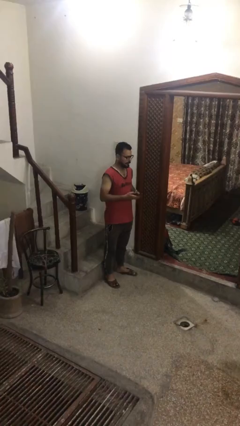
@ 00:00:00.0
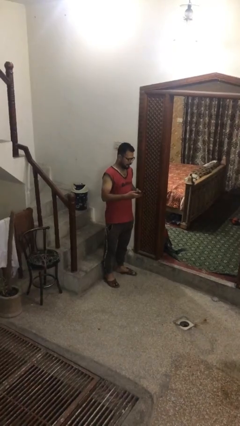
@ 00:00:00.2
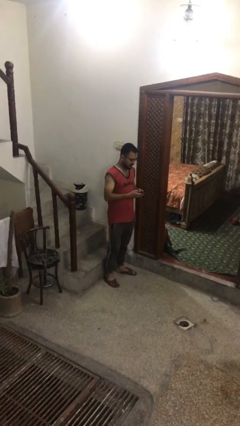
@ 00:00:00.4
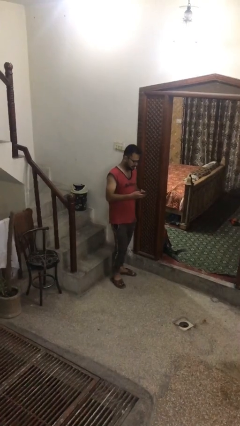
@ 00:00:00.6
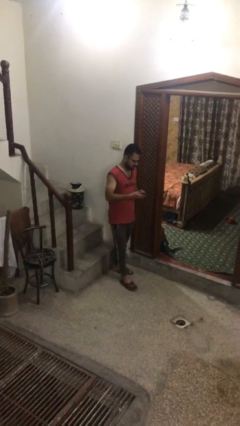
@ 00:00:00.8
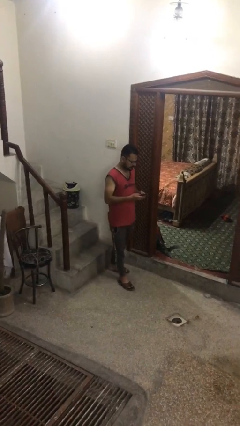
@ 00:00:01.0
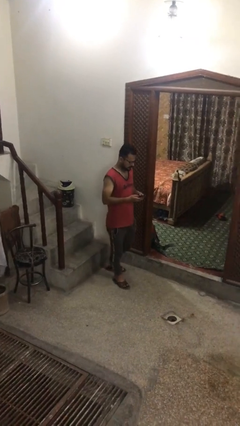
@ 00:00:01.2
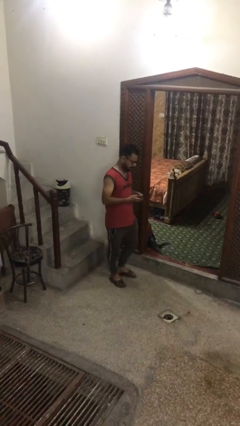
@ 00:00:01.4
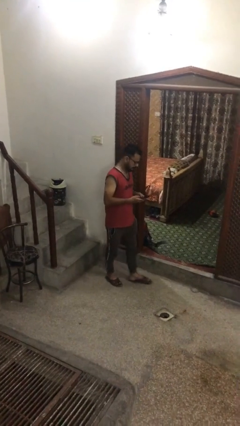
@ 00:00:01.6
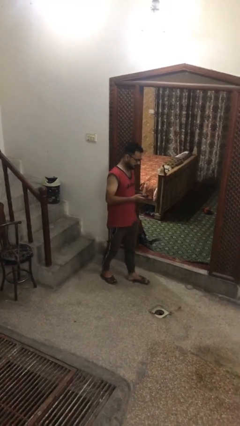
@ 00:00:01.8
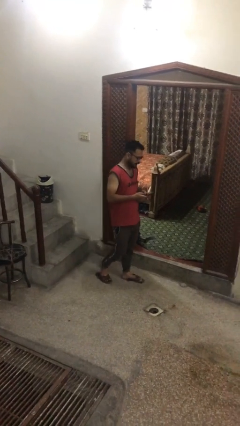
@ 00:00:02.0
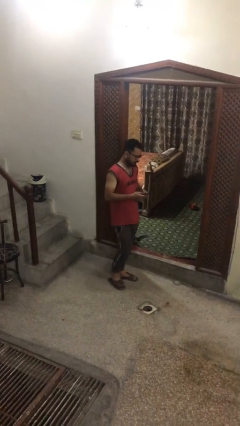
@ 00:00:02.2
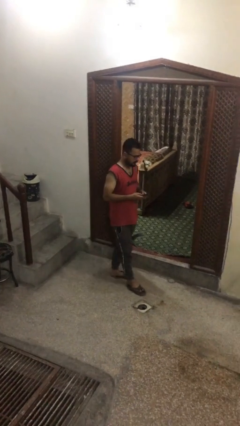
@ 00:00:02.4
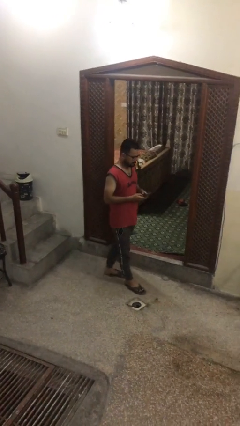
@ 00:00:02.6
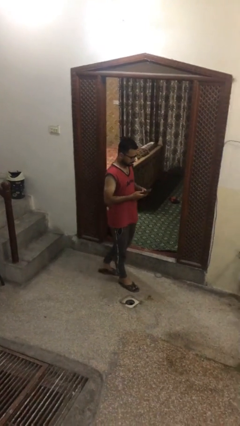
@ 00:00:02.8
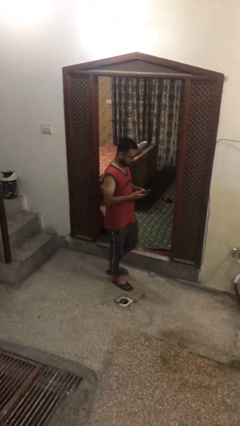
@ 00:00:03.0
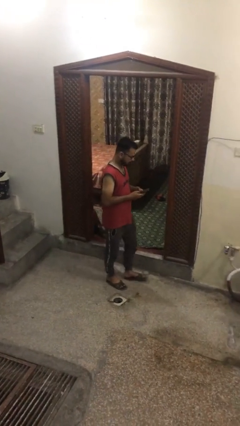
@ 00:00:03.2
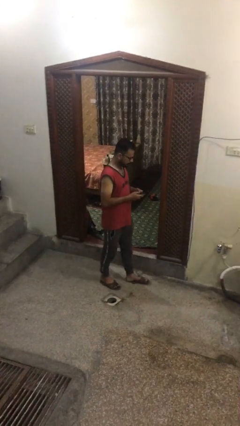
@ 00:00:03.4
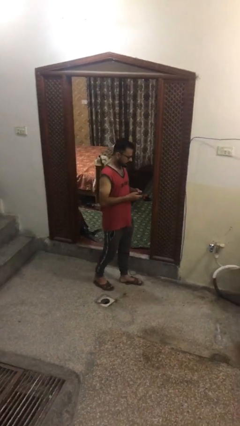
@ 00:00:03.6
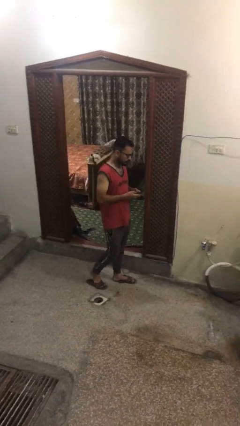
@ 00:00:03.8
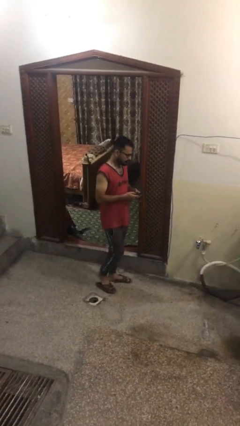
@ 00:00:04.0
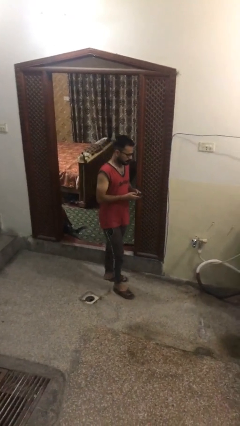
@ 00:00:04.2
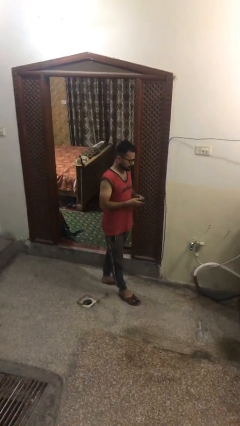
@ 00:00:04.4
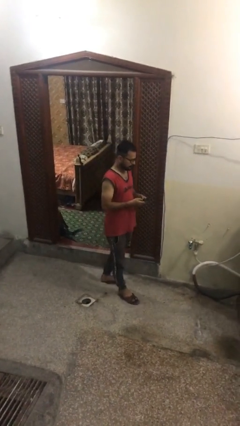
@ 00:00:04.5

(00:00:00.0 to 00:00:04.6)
person texts on phone

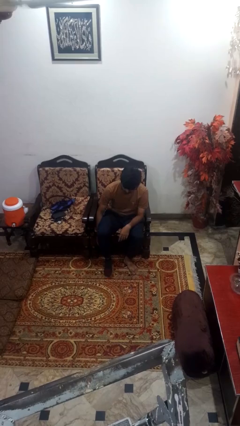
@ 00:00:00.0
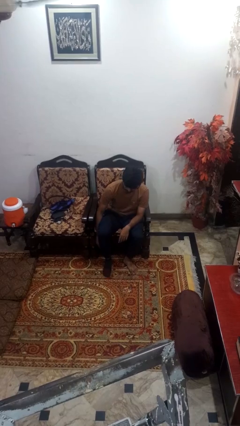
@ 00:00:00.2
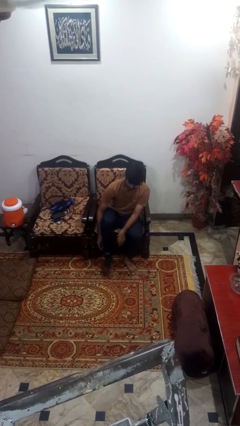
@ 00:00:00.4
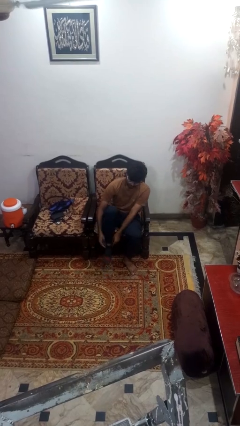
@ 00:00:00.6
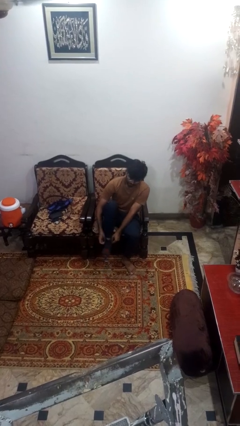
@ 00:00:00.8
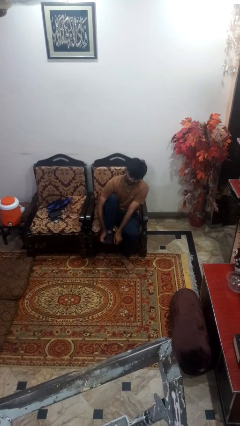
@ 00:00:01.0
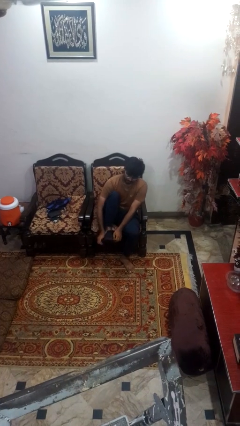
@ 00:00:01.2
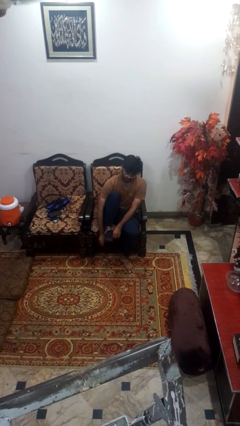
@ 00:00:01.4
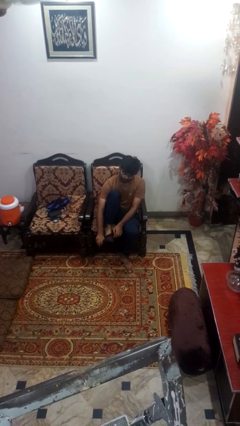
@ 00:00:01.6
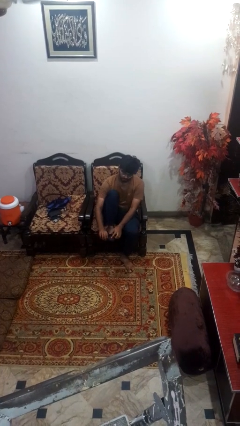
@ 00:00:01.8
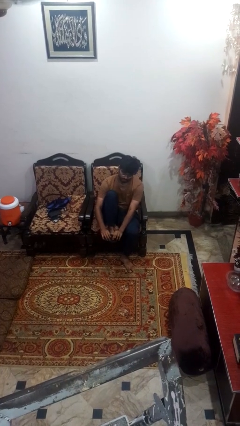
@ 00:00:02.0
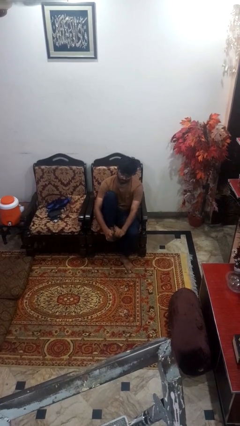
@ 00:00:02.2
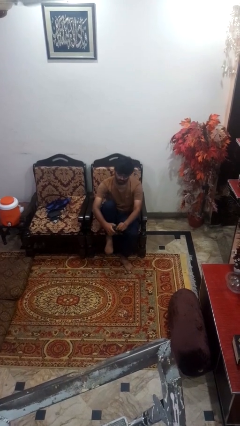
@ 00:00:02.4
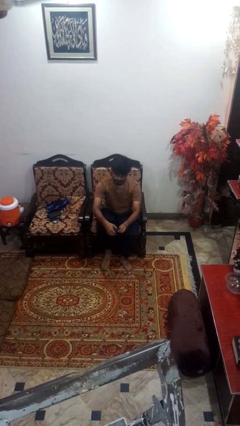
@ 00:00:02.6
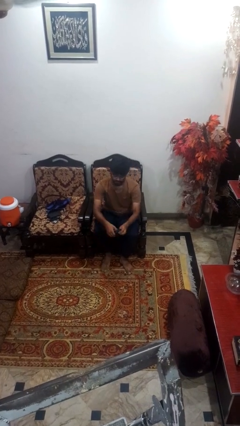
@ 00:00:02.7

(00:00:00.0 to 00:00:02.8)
person takes off socks

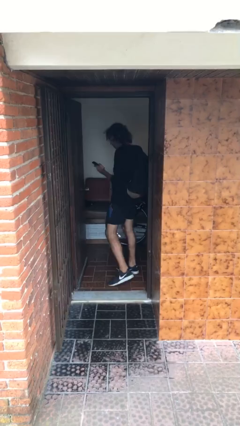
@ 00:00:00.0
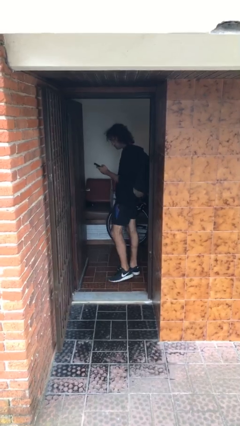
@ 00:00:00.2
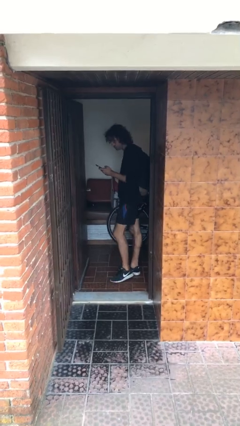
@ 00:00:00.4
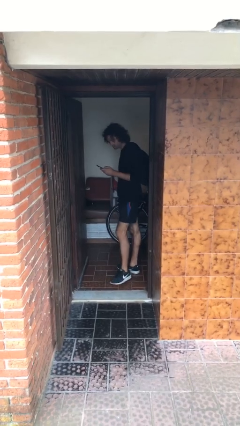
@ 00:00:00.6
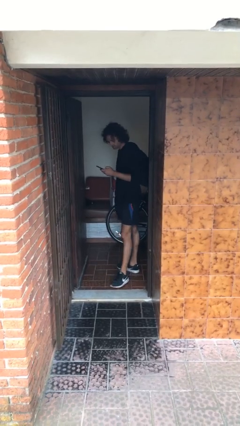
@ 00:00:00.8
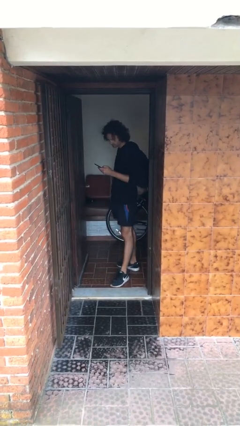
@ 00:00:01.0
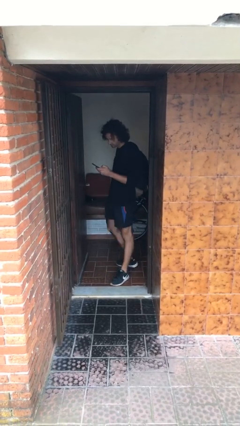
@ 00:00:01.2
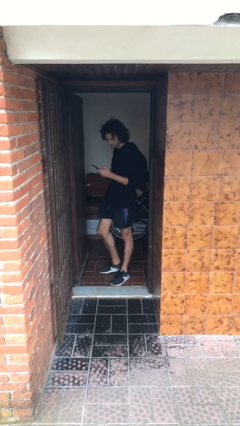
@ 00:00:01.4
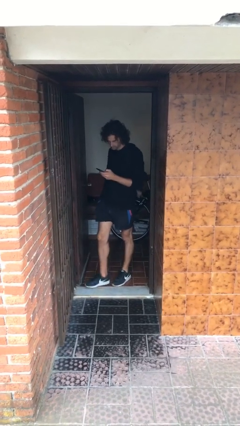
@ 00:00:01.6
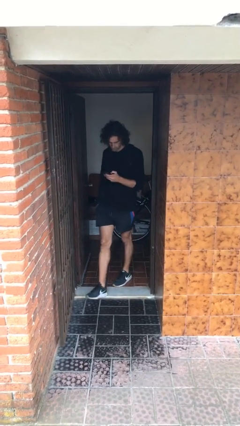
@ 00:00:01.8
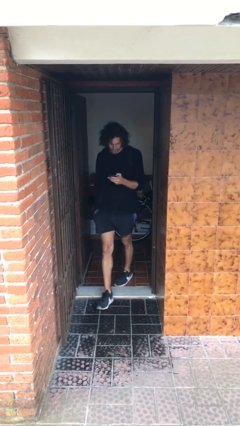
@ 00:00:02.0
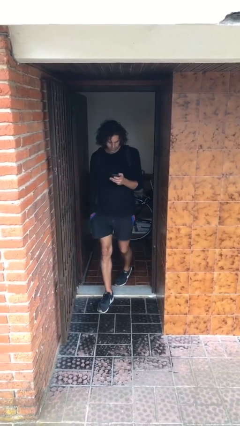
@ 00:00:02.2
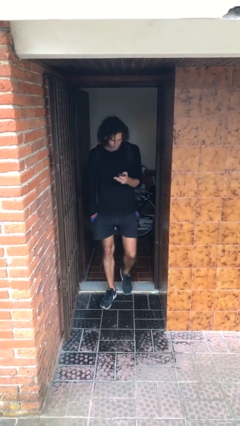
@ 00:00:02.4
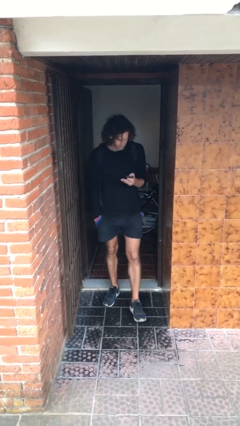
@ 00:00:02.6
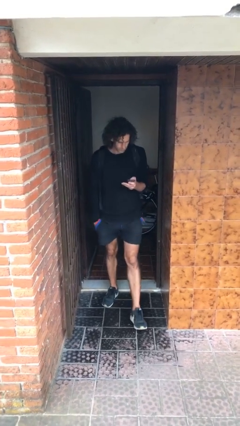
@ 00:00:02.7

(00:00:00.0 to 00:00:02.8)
person enters scene through structure

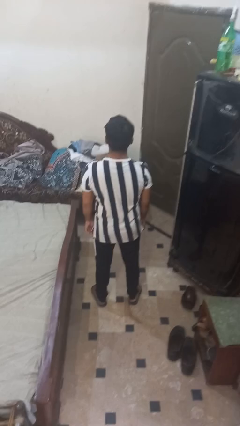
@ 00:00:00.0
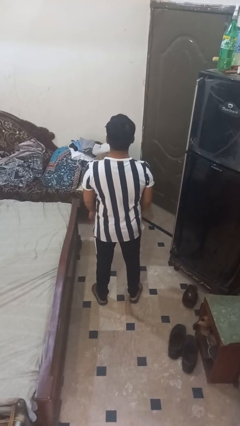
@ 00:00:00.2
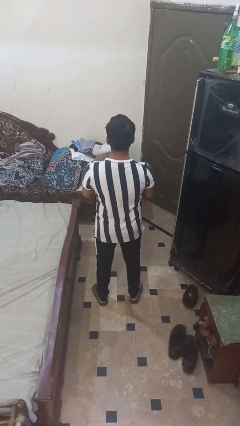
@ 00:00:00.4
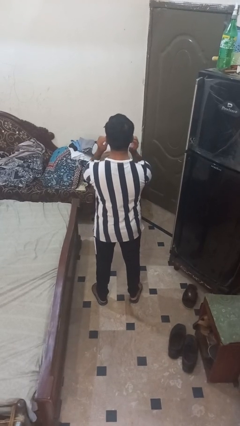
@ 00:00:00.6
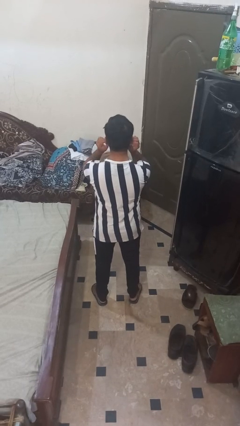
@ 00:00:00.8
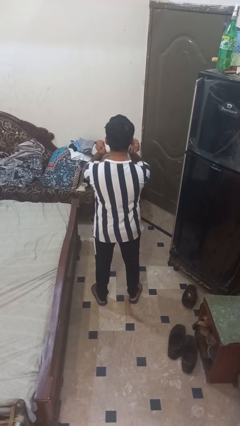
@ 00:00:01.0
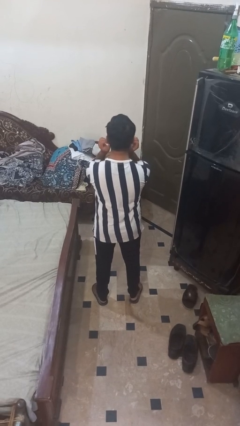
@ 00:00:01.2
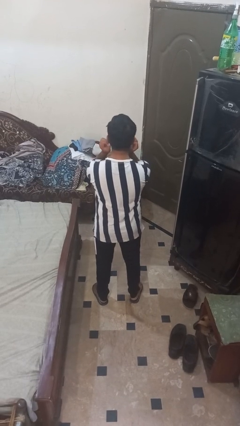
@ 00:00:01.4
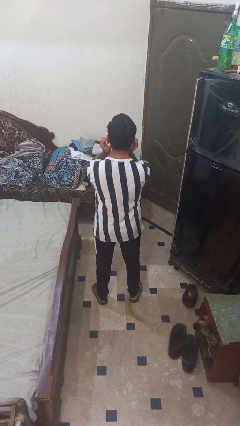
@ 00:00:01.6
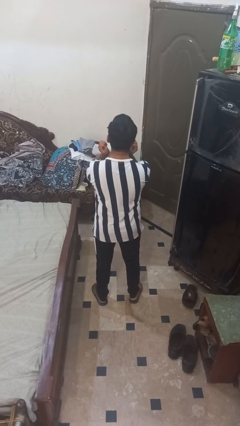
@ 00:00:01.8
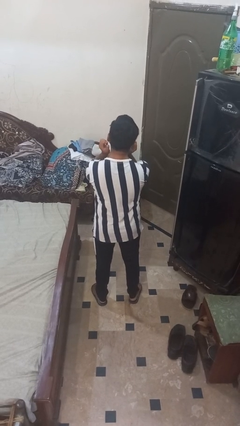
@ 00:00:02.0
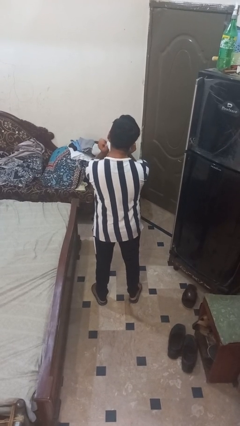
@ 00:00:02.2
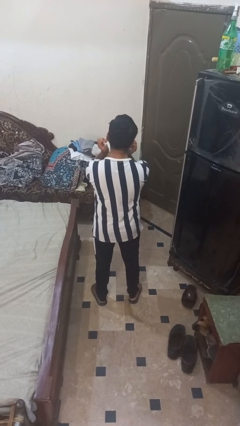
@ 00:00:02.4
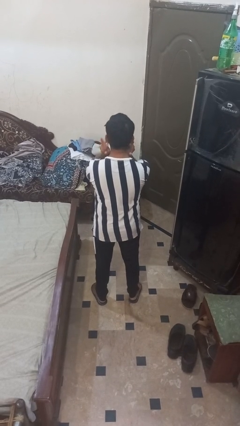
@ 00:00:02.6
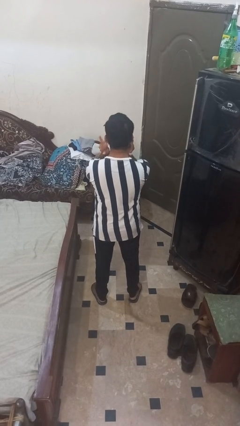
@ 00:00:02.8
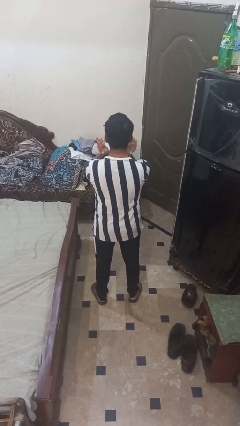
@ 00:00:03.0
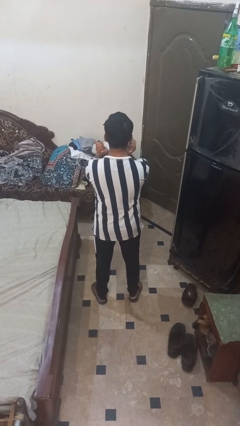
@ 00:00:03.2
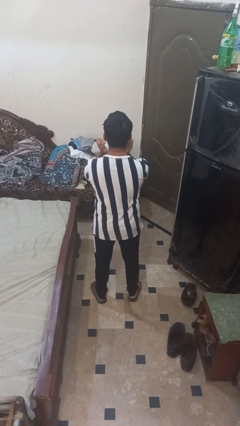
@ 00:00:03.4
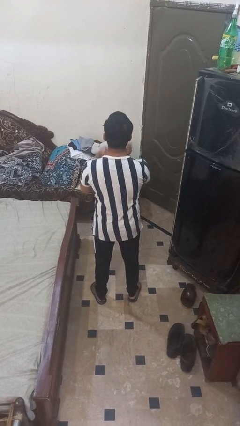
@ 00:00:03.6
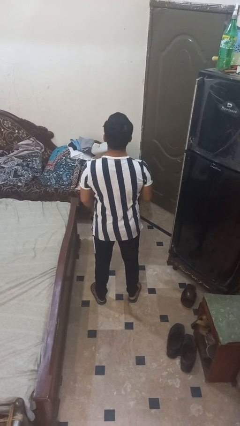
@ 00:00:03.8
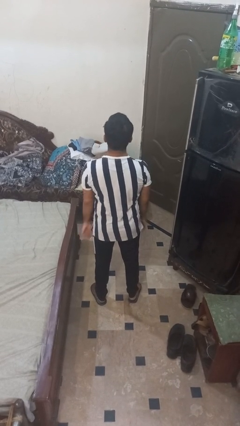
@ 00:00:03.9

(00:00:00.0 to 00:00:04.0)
person touches earlobe

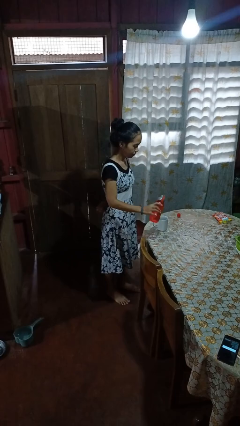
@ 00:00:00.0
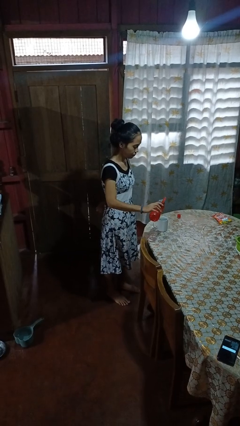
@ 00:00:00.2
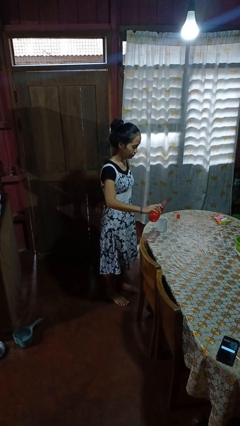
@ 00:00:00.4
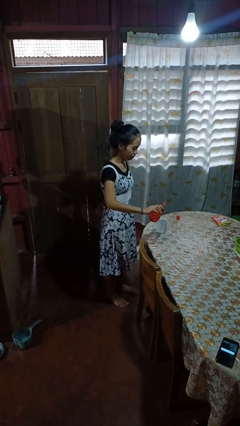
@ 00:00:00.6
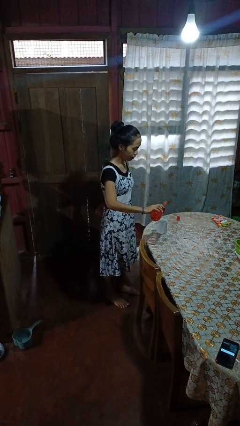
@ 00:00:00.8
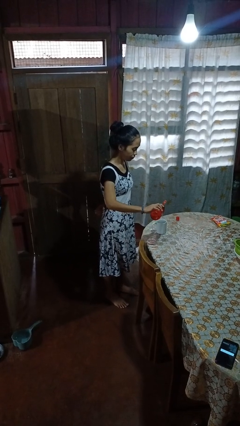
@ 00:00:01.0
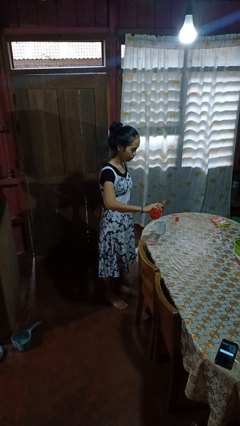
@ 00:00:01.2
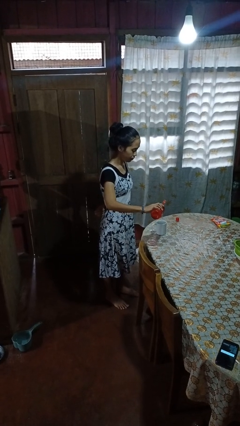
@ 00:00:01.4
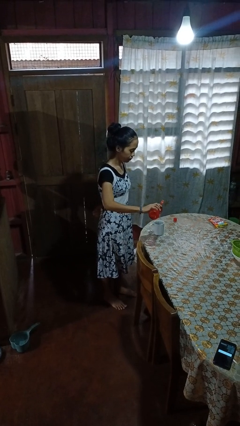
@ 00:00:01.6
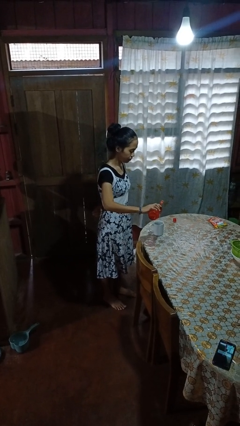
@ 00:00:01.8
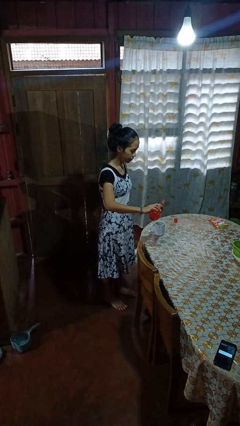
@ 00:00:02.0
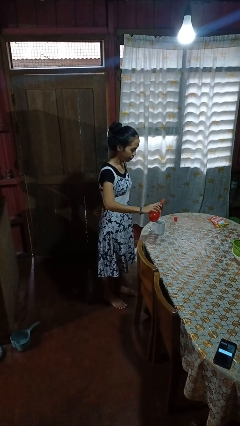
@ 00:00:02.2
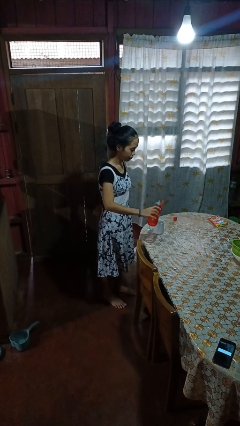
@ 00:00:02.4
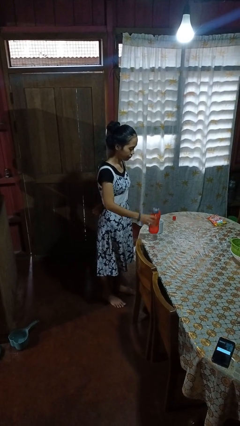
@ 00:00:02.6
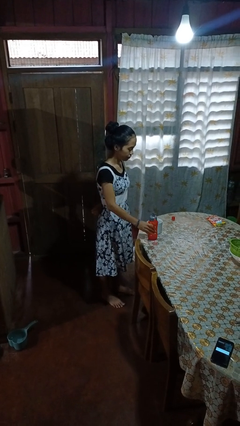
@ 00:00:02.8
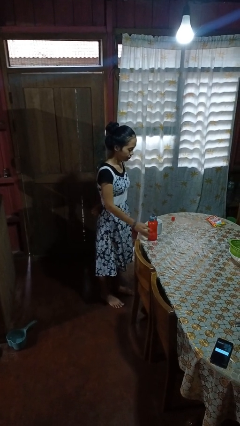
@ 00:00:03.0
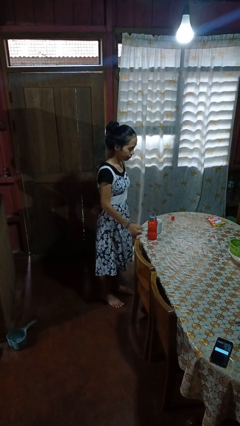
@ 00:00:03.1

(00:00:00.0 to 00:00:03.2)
person pours liquid into cup
